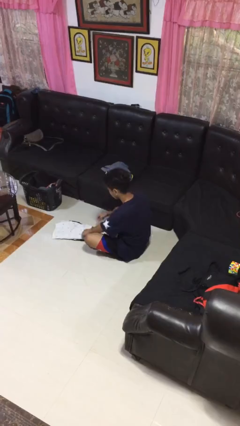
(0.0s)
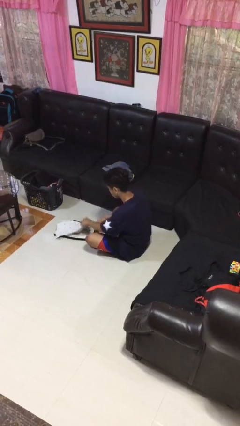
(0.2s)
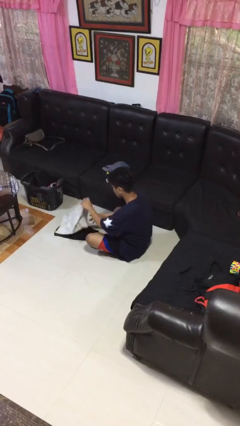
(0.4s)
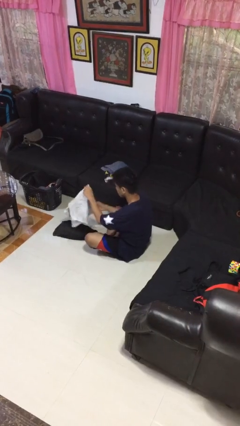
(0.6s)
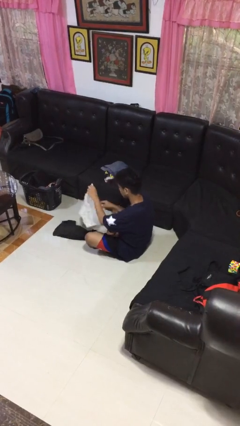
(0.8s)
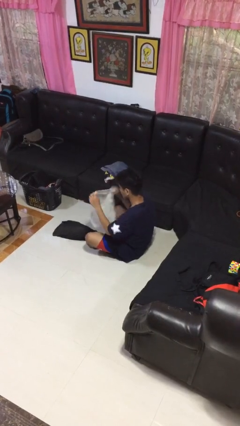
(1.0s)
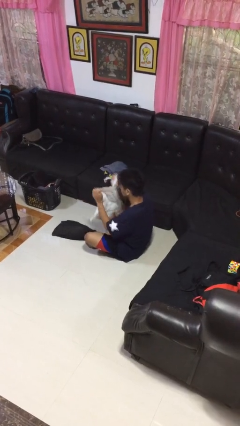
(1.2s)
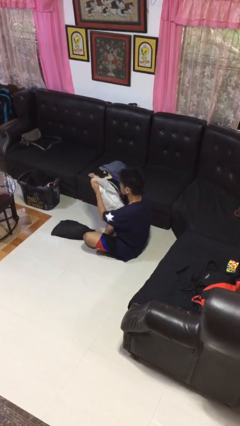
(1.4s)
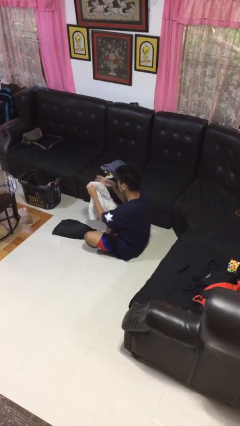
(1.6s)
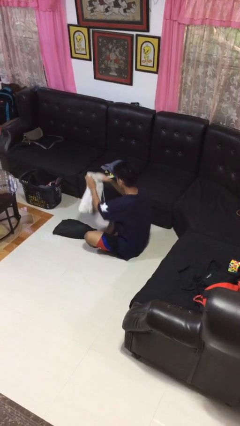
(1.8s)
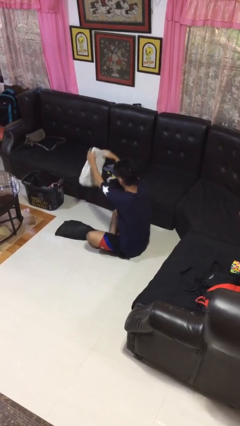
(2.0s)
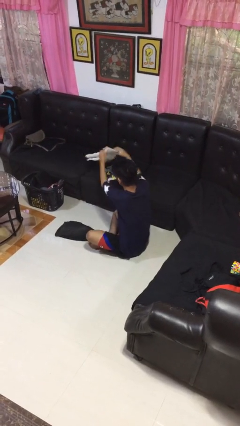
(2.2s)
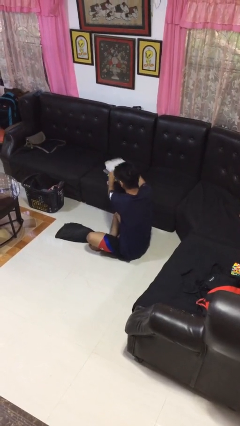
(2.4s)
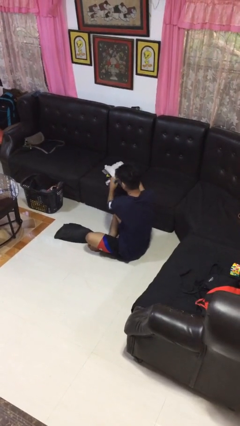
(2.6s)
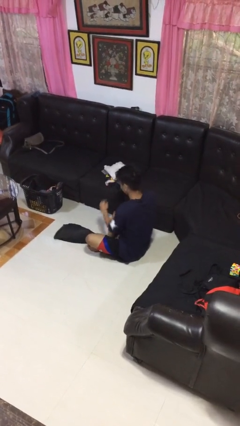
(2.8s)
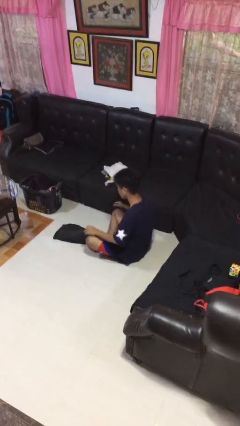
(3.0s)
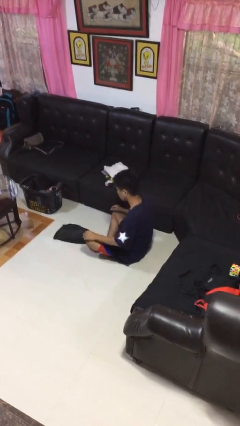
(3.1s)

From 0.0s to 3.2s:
person folds pants

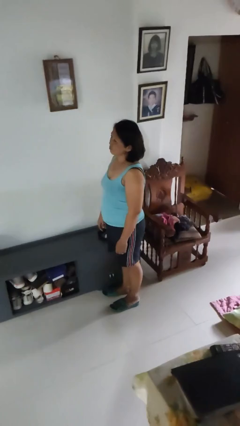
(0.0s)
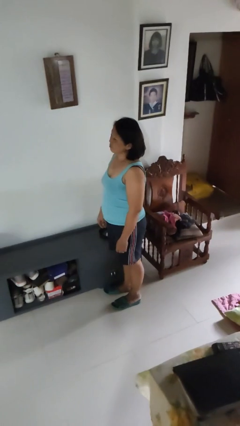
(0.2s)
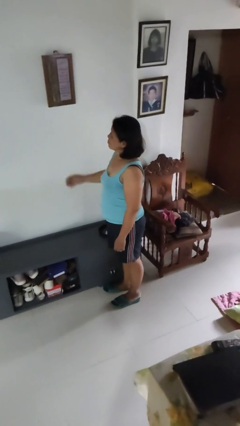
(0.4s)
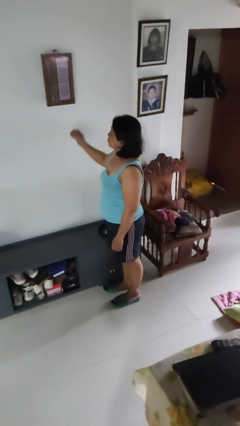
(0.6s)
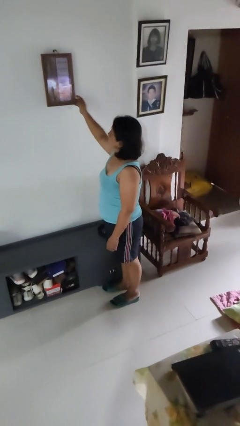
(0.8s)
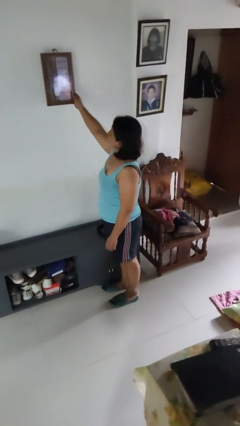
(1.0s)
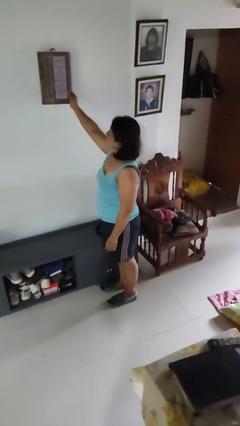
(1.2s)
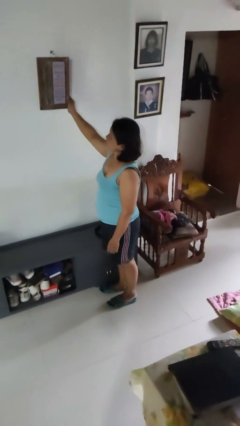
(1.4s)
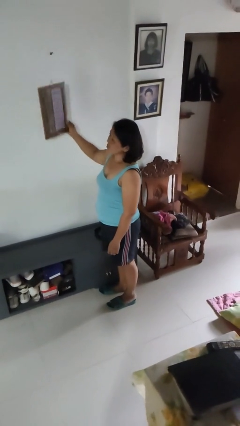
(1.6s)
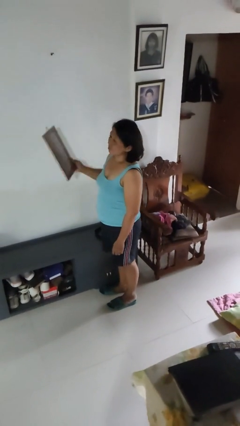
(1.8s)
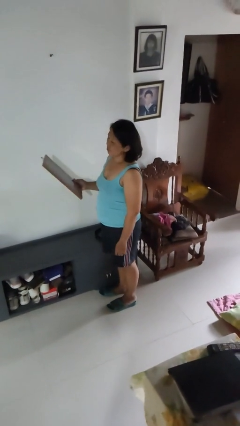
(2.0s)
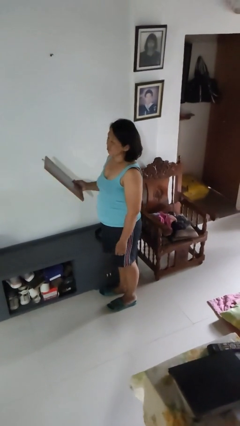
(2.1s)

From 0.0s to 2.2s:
person takes down picture frame

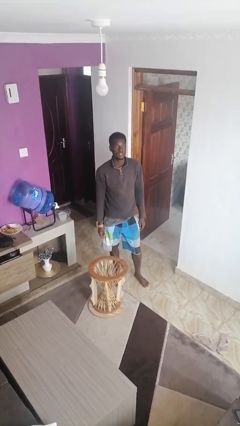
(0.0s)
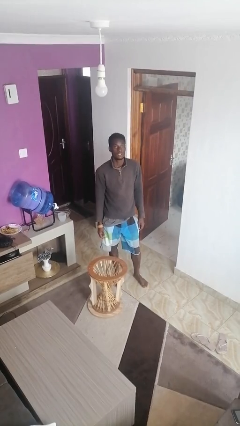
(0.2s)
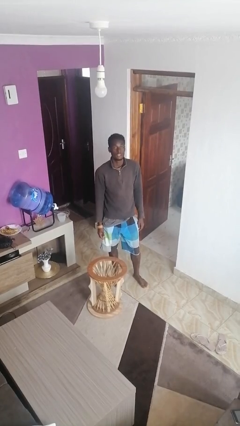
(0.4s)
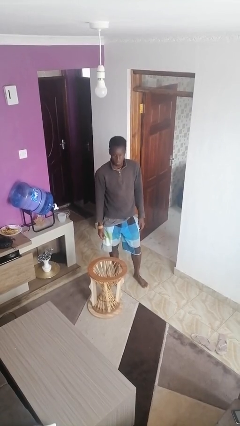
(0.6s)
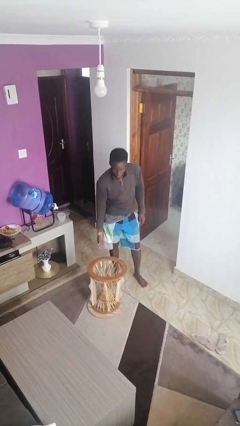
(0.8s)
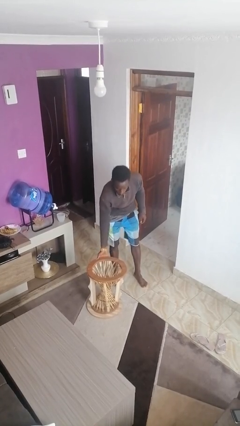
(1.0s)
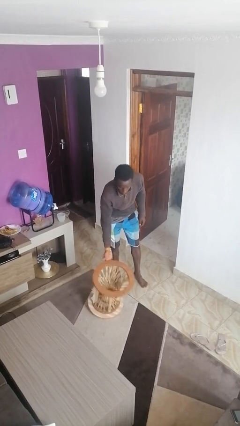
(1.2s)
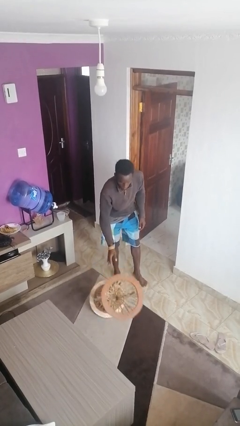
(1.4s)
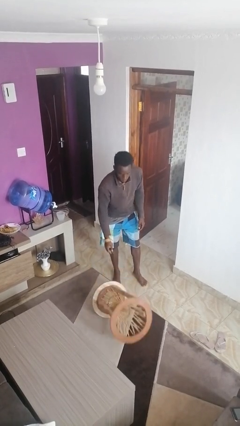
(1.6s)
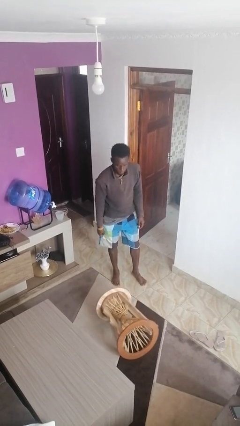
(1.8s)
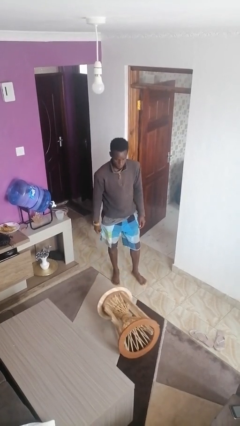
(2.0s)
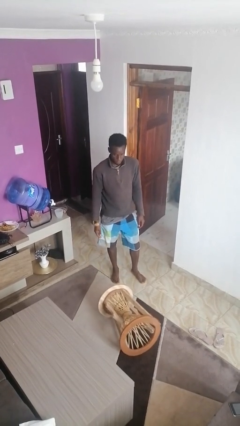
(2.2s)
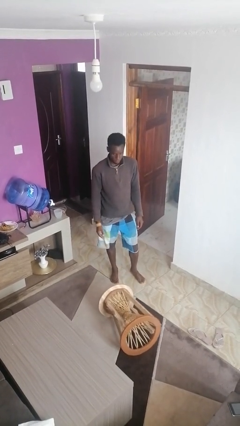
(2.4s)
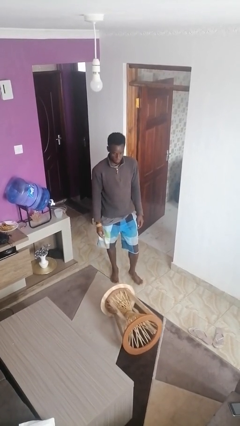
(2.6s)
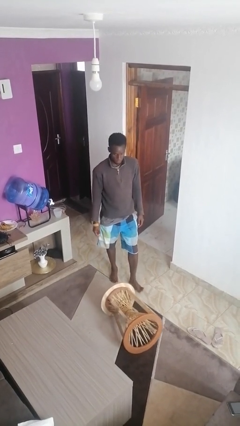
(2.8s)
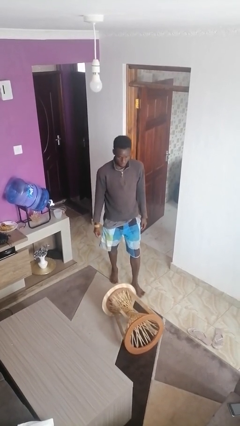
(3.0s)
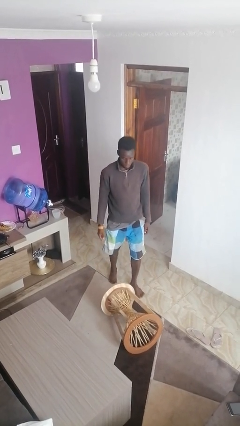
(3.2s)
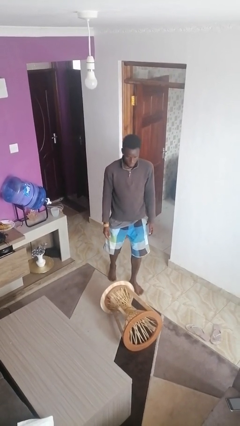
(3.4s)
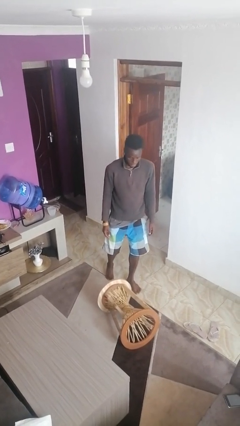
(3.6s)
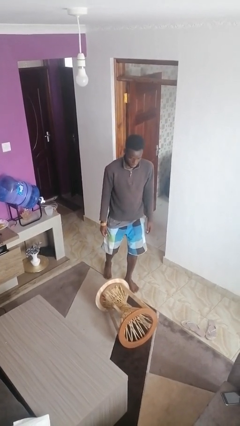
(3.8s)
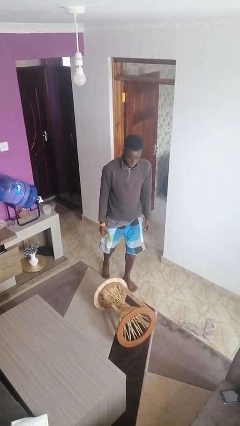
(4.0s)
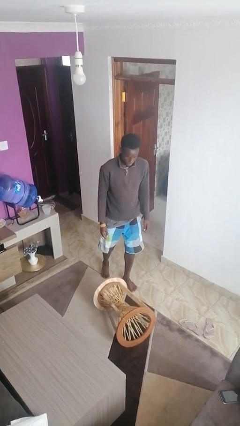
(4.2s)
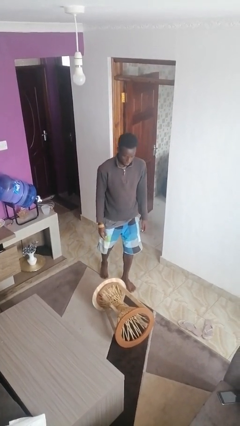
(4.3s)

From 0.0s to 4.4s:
person knocks over furniture

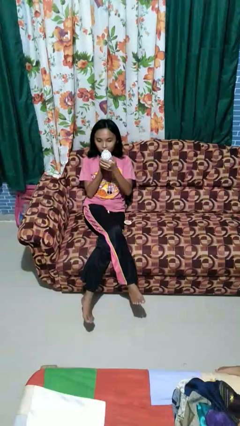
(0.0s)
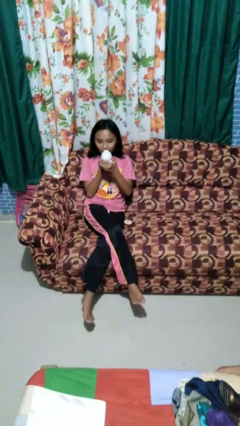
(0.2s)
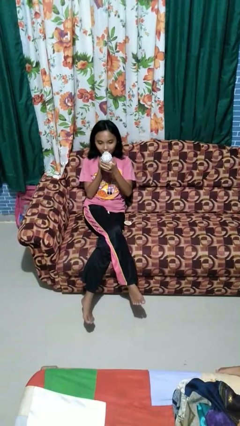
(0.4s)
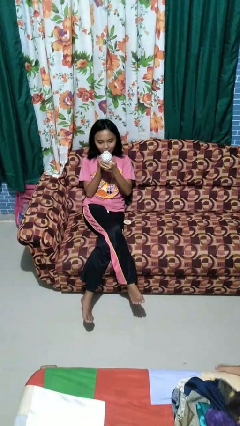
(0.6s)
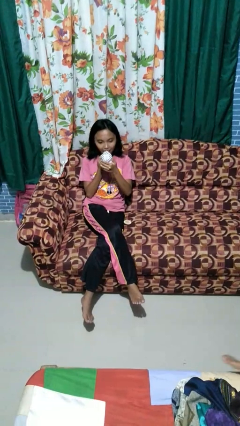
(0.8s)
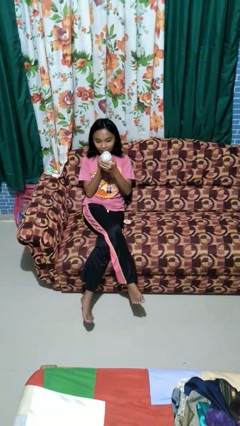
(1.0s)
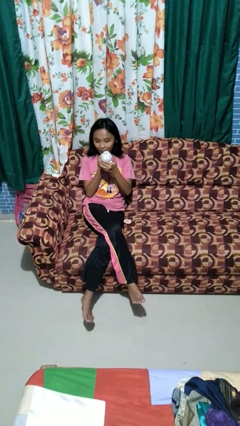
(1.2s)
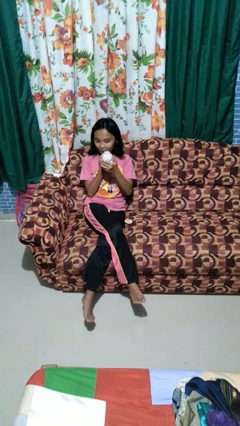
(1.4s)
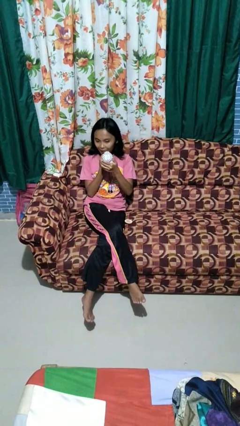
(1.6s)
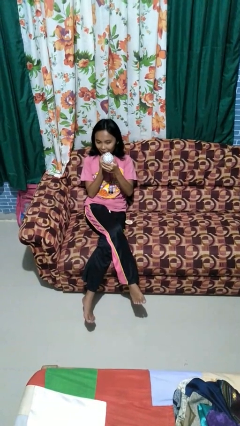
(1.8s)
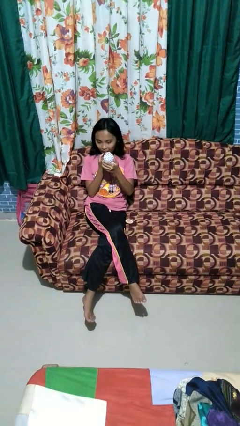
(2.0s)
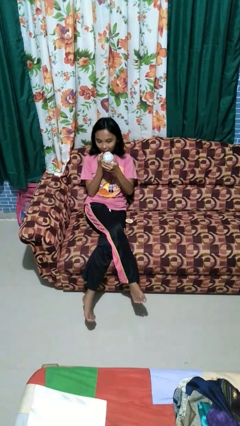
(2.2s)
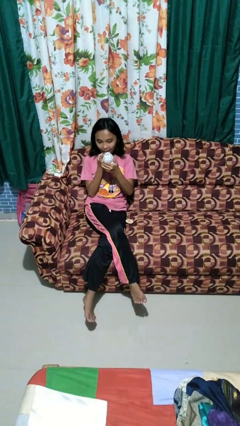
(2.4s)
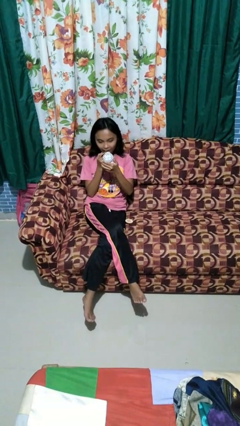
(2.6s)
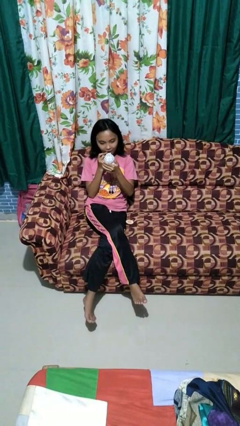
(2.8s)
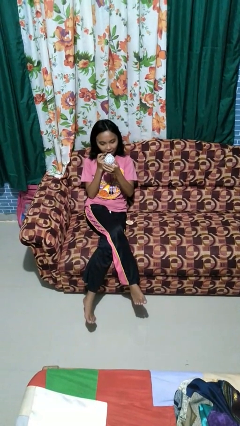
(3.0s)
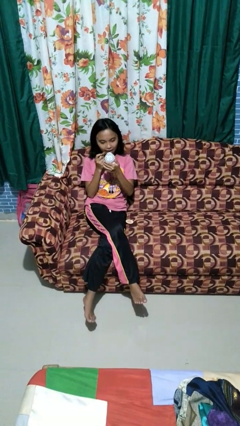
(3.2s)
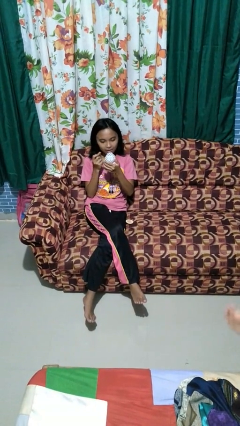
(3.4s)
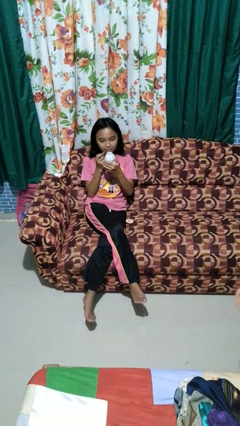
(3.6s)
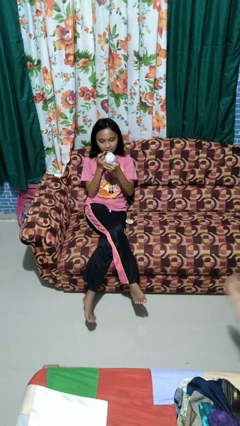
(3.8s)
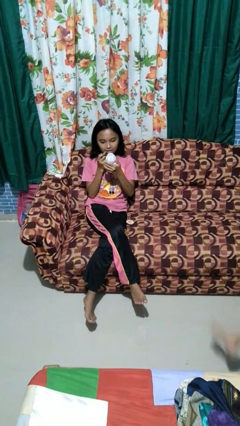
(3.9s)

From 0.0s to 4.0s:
person applies lip makeup

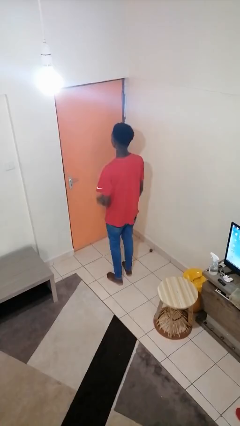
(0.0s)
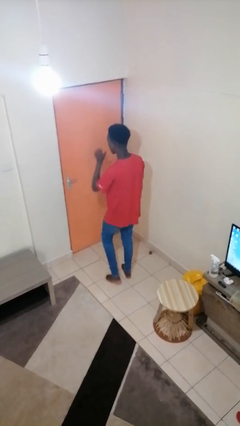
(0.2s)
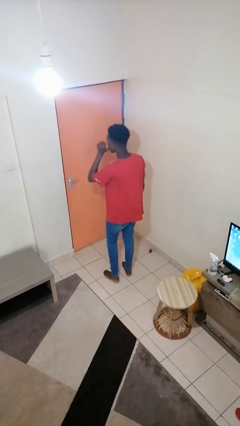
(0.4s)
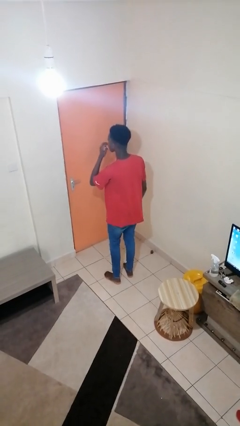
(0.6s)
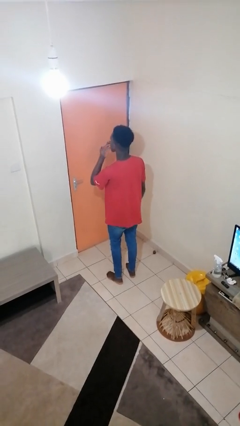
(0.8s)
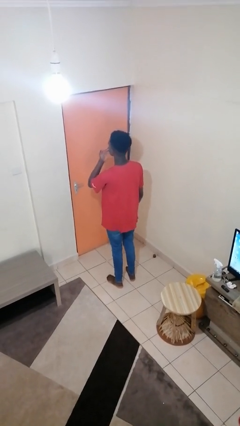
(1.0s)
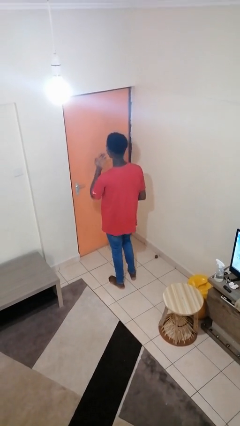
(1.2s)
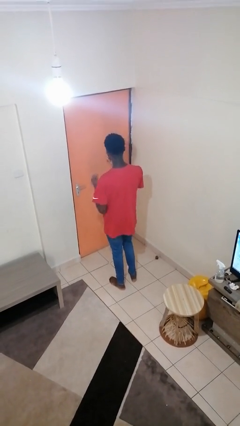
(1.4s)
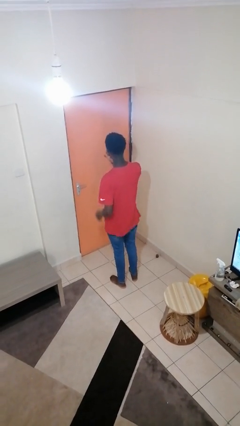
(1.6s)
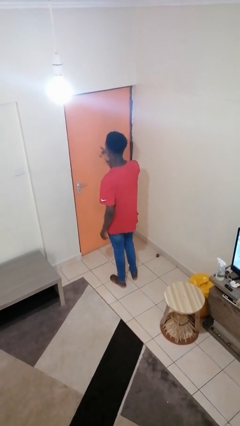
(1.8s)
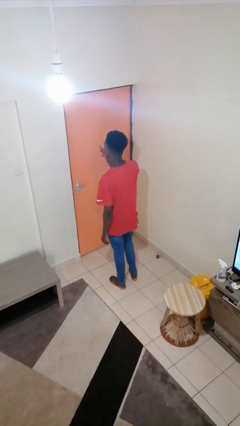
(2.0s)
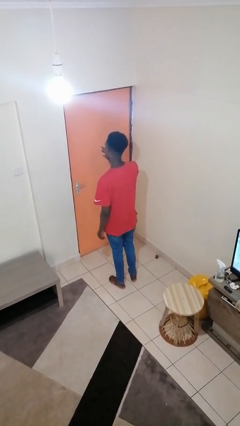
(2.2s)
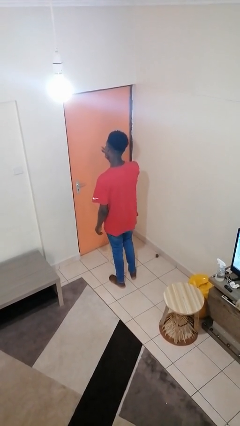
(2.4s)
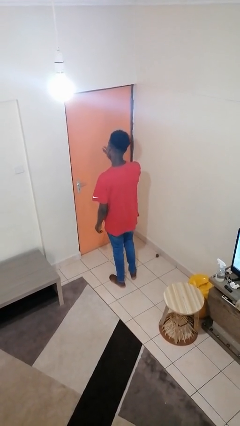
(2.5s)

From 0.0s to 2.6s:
person licks fingers

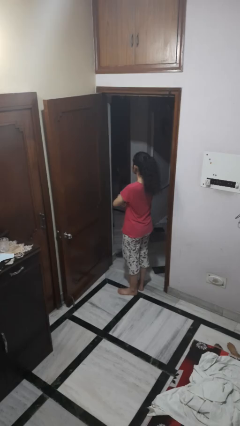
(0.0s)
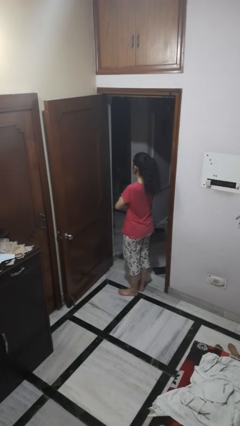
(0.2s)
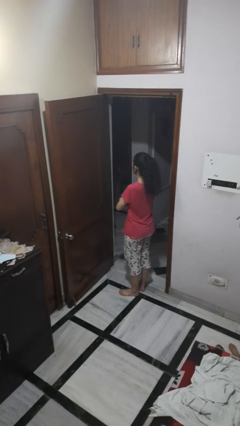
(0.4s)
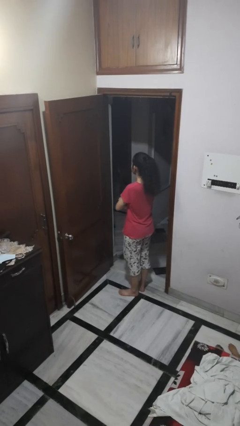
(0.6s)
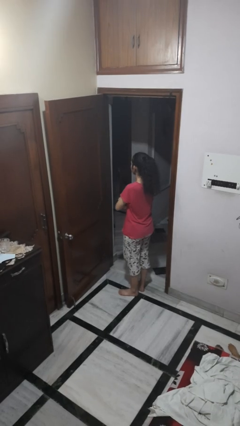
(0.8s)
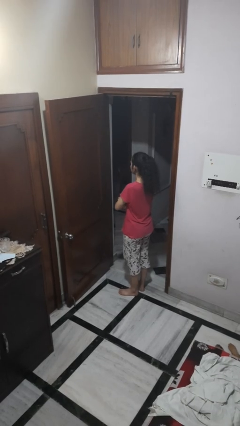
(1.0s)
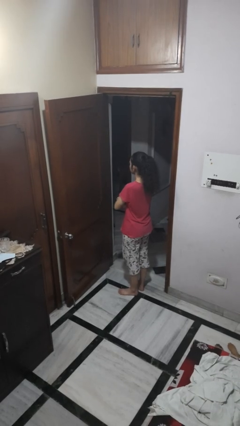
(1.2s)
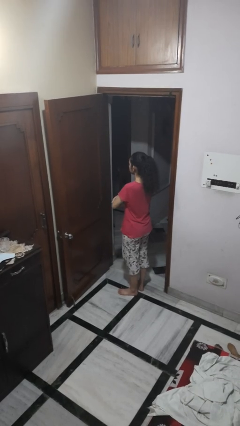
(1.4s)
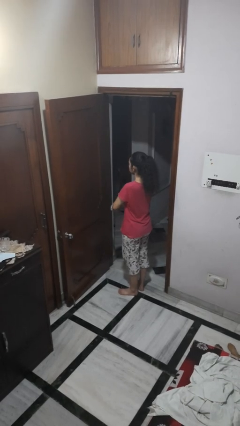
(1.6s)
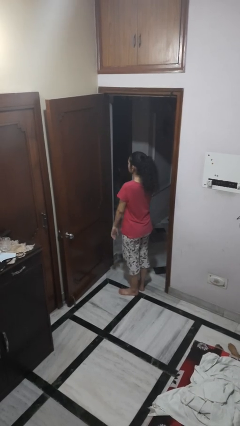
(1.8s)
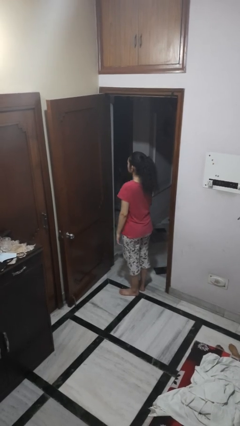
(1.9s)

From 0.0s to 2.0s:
person crosses arms
